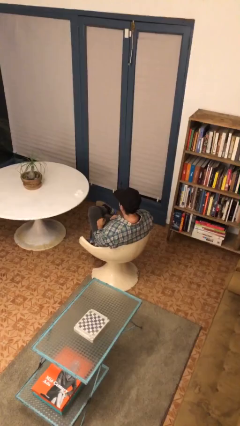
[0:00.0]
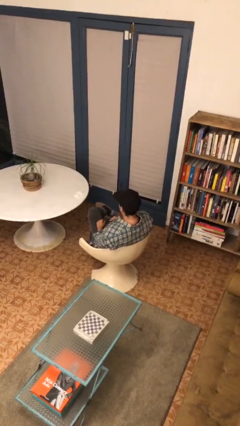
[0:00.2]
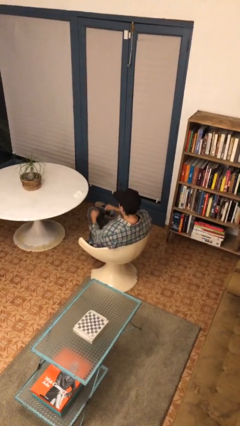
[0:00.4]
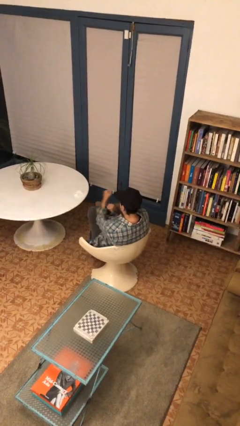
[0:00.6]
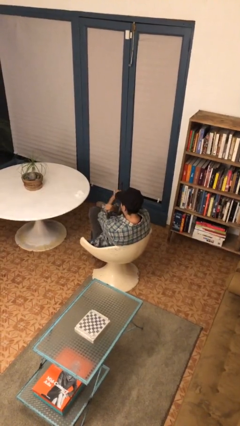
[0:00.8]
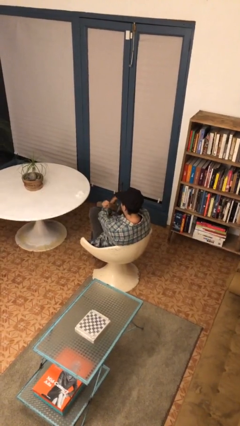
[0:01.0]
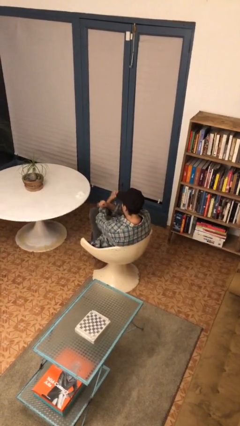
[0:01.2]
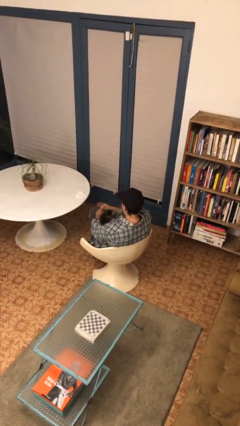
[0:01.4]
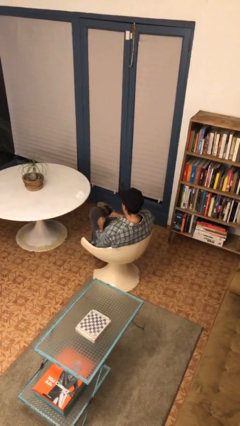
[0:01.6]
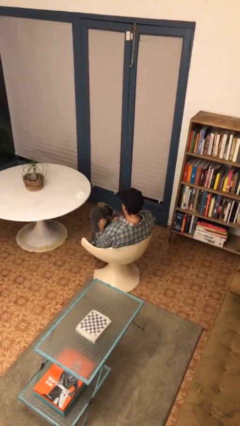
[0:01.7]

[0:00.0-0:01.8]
person gestures arms x

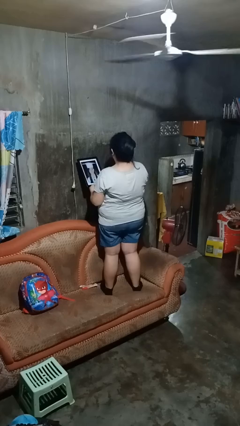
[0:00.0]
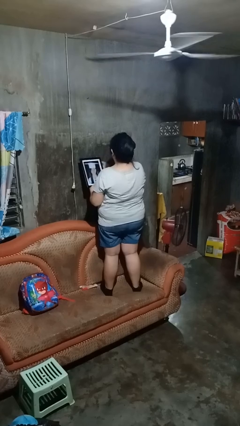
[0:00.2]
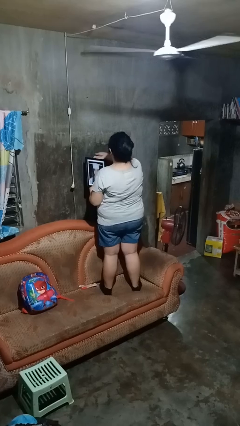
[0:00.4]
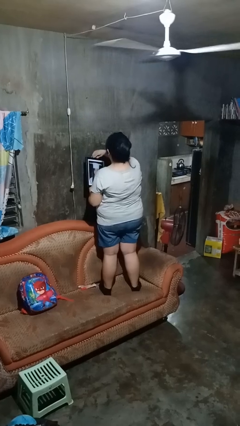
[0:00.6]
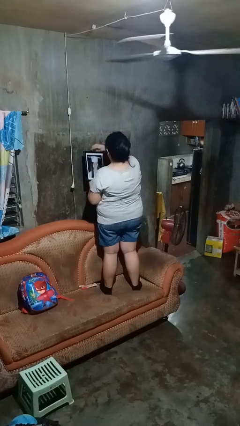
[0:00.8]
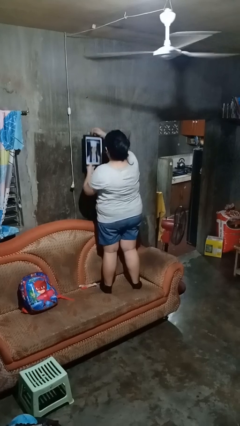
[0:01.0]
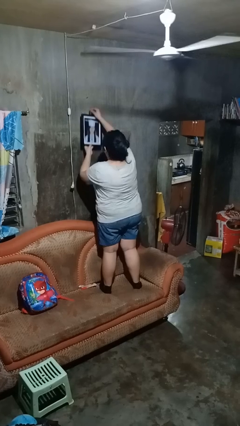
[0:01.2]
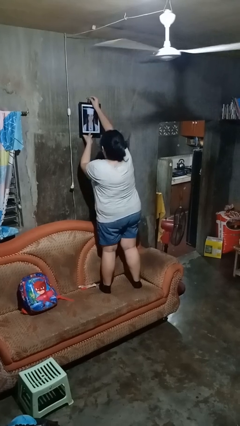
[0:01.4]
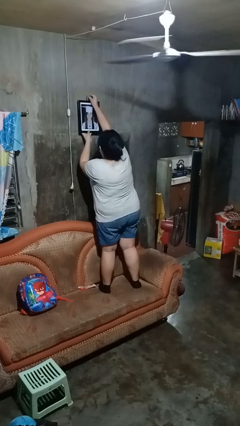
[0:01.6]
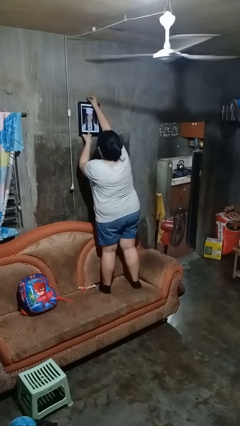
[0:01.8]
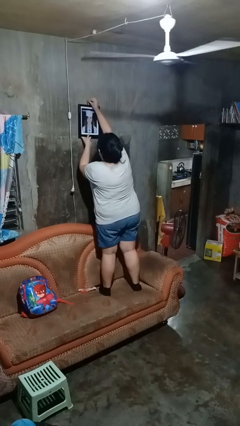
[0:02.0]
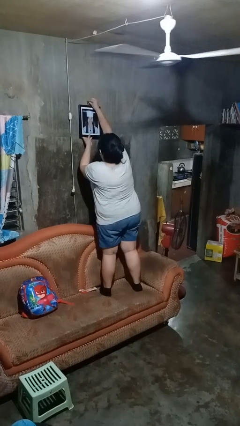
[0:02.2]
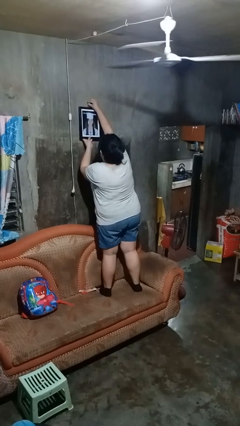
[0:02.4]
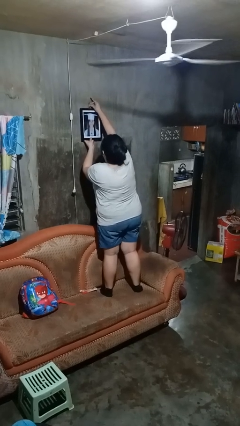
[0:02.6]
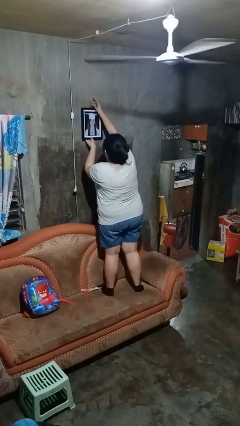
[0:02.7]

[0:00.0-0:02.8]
person puts up picture frame

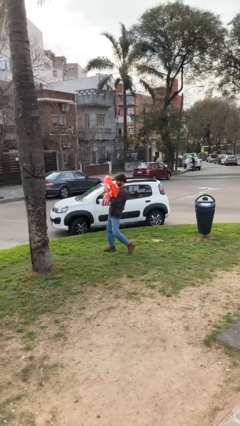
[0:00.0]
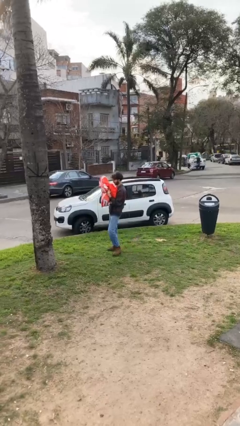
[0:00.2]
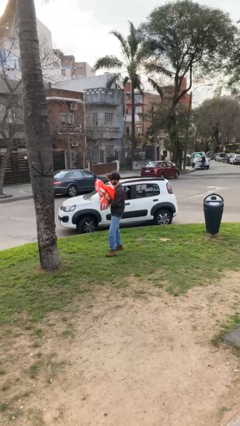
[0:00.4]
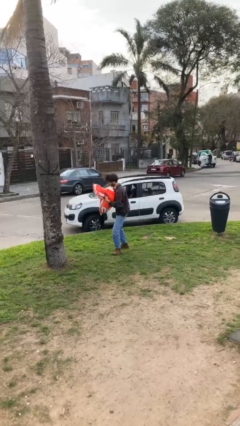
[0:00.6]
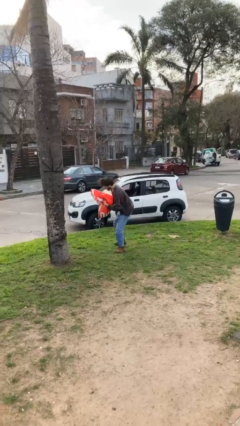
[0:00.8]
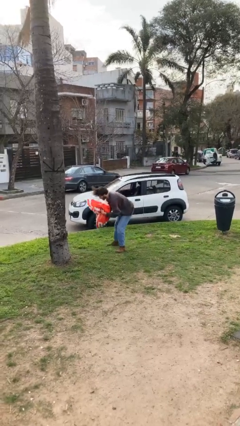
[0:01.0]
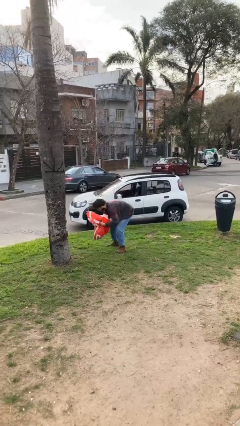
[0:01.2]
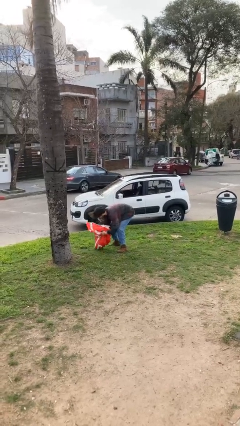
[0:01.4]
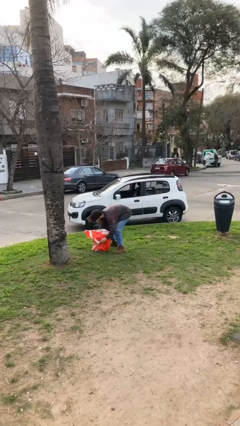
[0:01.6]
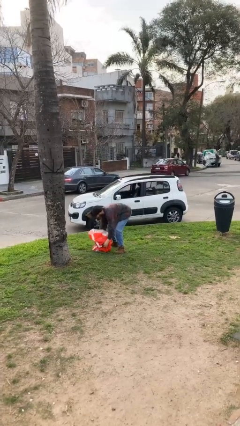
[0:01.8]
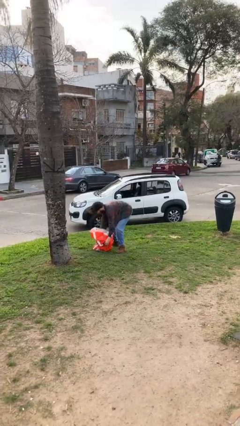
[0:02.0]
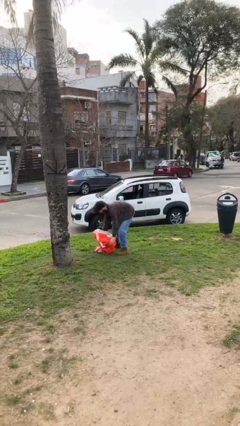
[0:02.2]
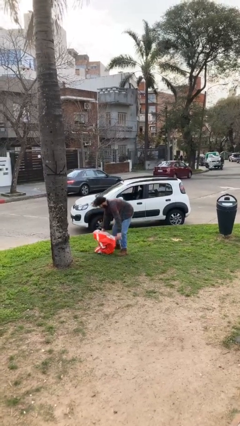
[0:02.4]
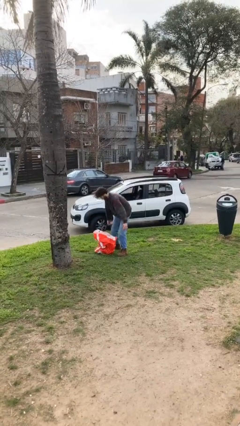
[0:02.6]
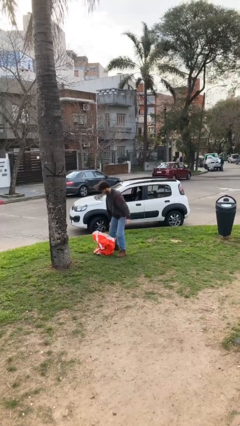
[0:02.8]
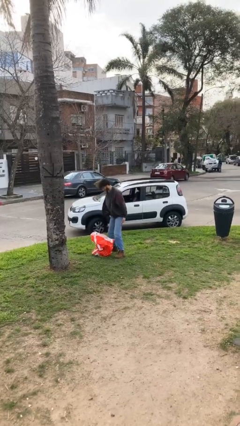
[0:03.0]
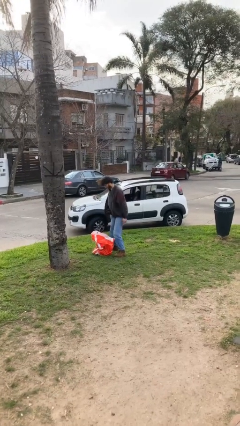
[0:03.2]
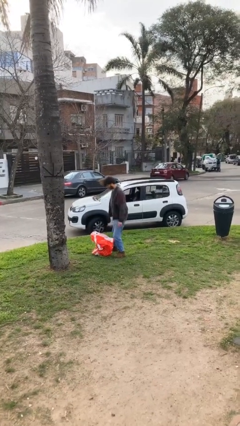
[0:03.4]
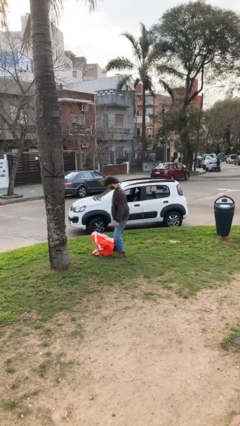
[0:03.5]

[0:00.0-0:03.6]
person puts down object on floor

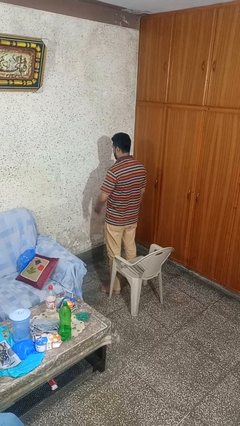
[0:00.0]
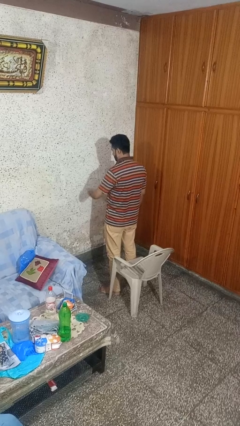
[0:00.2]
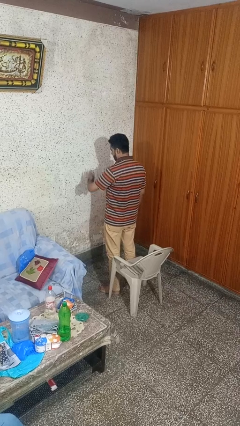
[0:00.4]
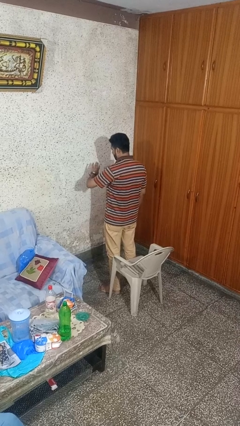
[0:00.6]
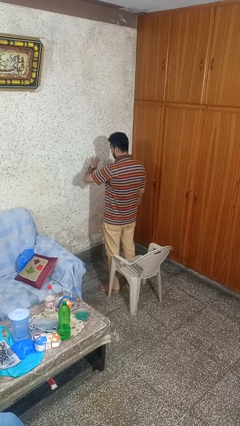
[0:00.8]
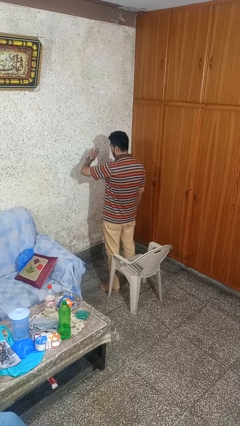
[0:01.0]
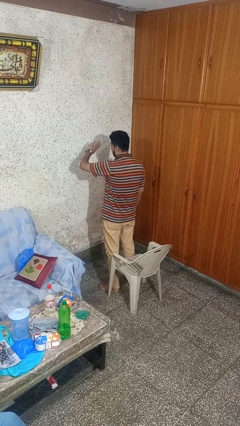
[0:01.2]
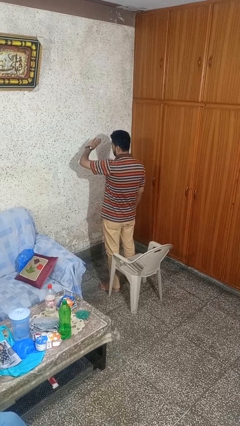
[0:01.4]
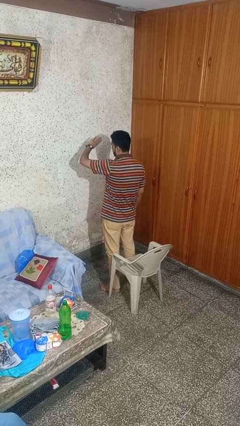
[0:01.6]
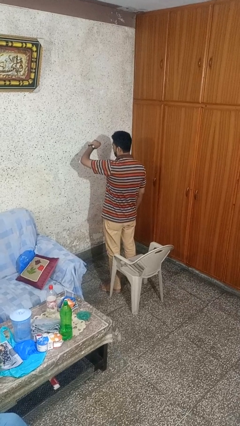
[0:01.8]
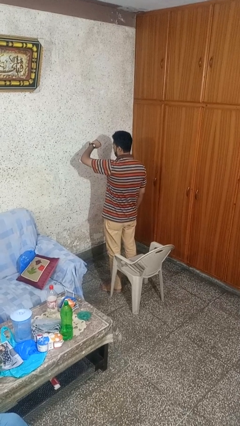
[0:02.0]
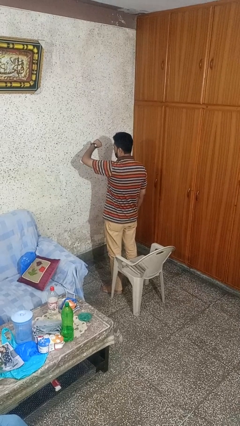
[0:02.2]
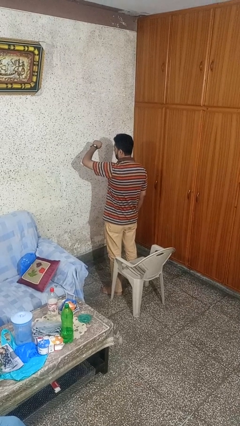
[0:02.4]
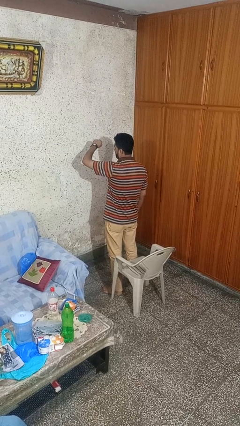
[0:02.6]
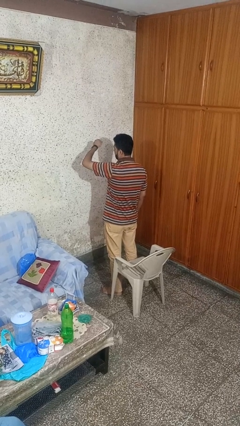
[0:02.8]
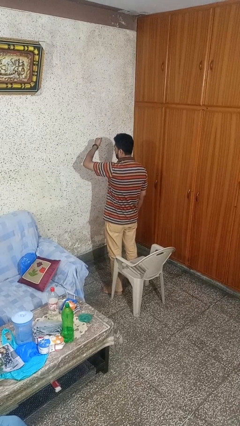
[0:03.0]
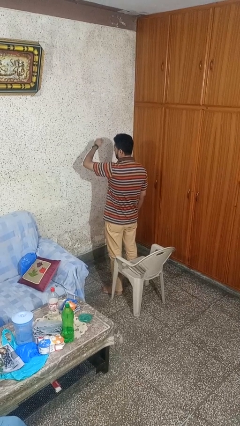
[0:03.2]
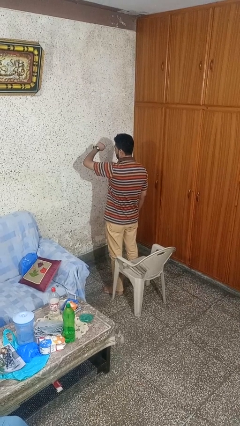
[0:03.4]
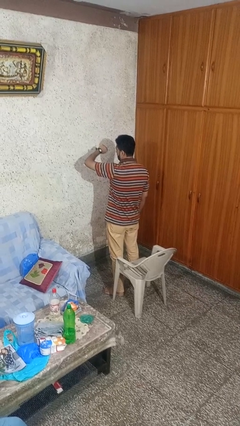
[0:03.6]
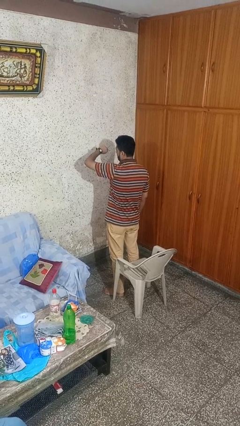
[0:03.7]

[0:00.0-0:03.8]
person looks at wristwatch

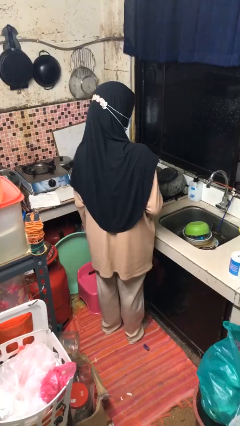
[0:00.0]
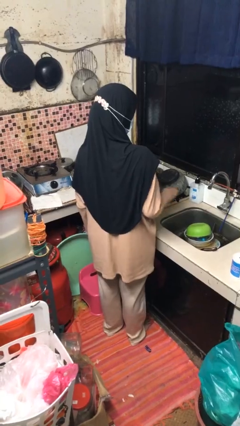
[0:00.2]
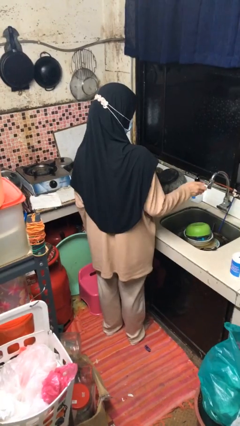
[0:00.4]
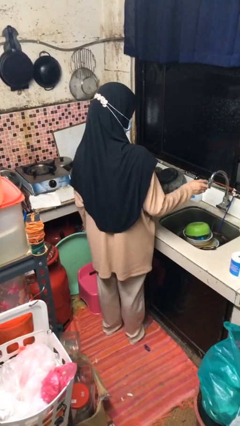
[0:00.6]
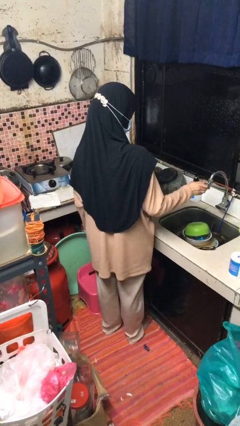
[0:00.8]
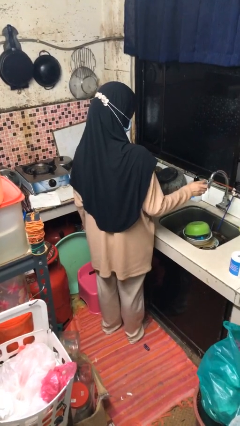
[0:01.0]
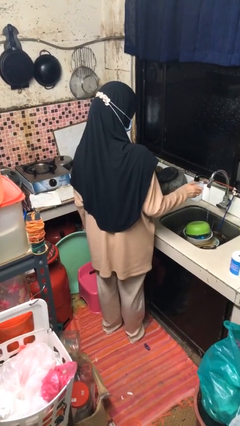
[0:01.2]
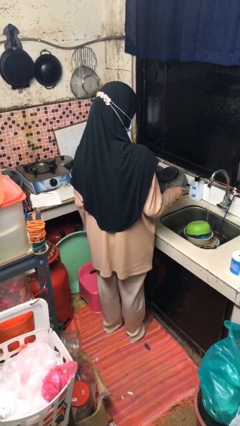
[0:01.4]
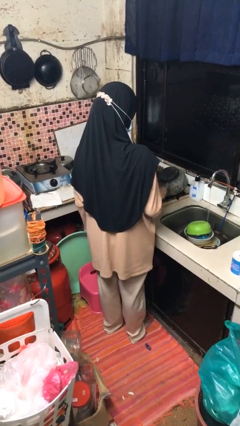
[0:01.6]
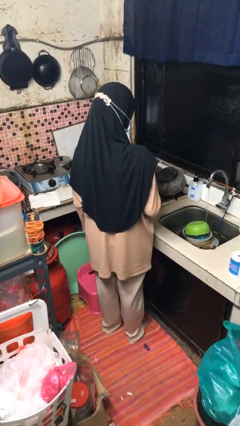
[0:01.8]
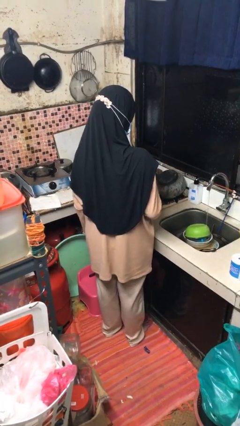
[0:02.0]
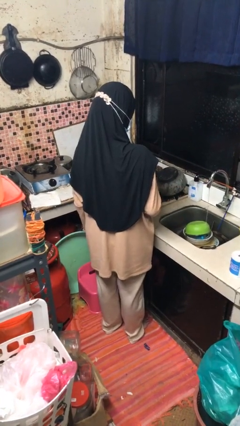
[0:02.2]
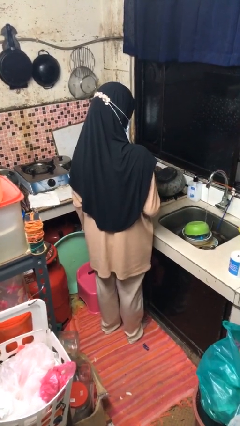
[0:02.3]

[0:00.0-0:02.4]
person turns on faucet

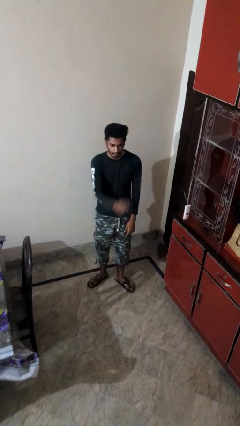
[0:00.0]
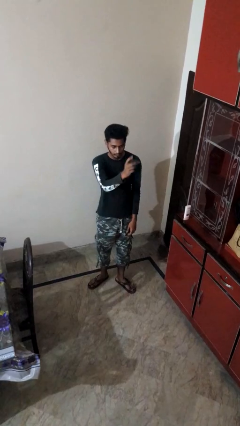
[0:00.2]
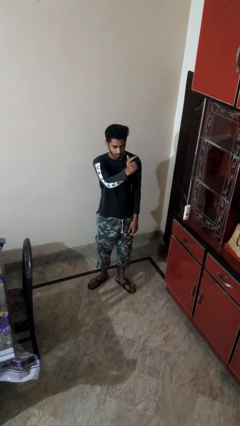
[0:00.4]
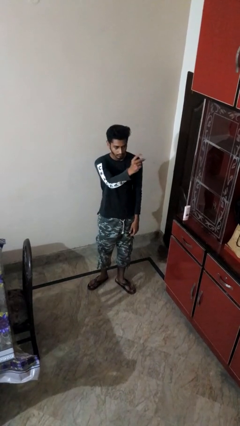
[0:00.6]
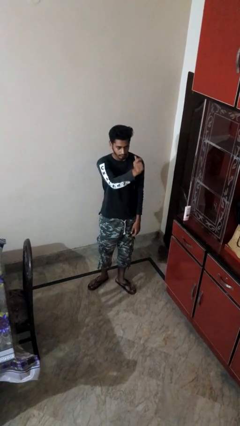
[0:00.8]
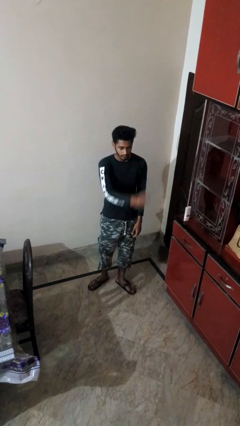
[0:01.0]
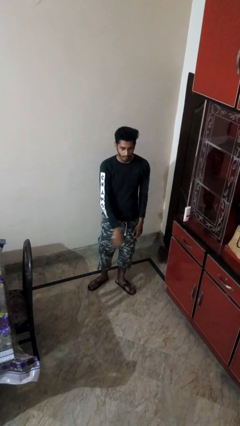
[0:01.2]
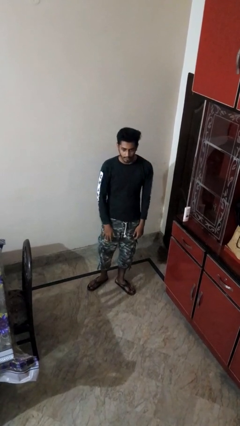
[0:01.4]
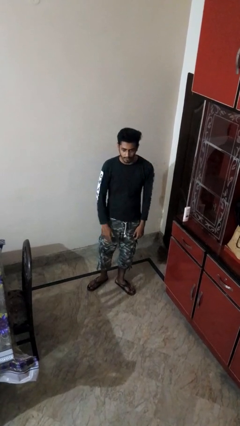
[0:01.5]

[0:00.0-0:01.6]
person snaps fingers

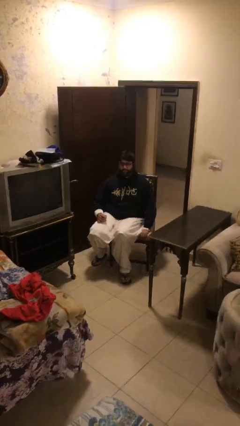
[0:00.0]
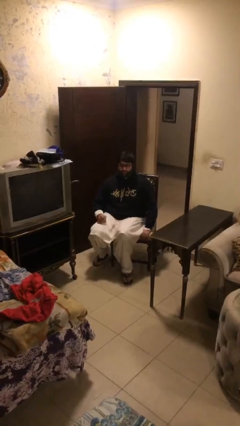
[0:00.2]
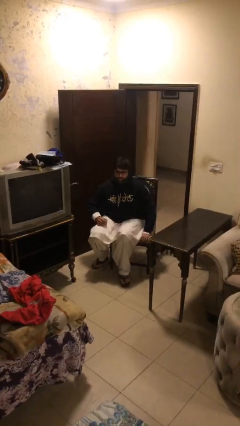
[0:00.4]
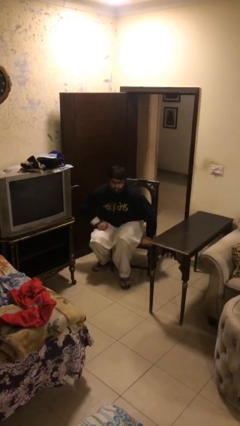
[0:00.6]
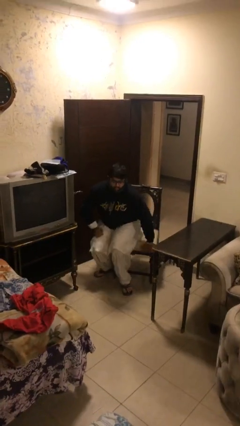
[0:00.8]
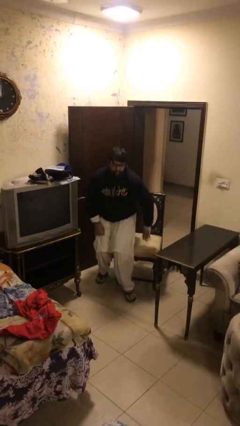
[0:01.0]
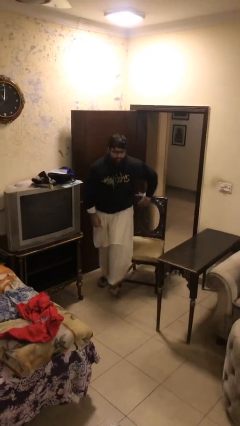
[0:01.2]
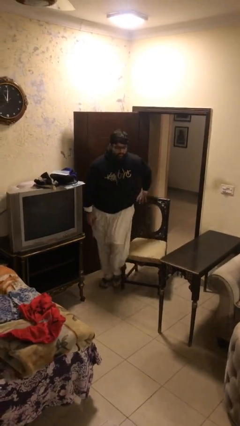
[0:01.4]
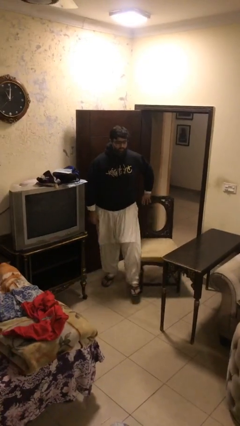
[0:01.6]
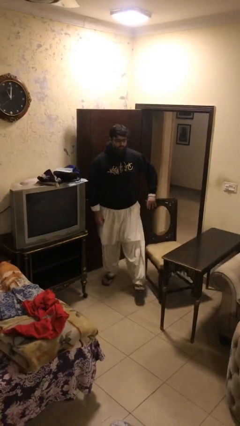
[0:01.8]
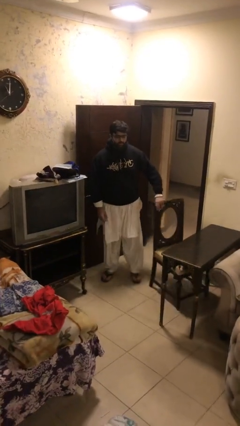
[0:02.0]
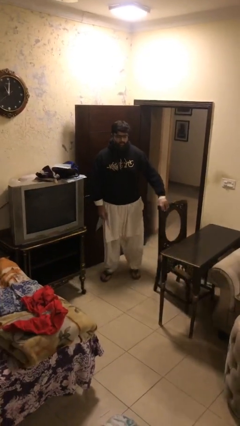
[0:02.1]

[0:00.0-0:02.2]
person stands up
